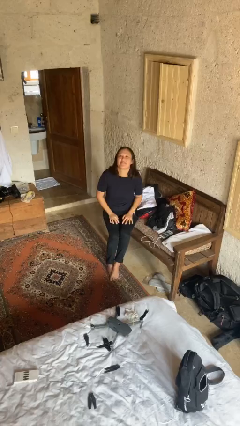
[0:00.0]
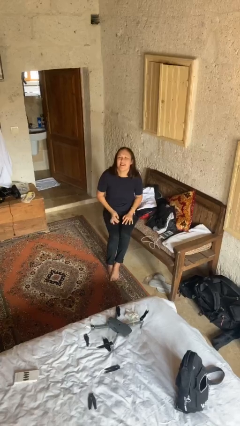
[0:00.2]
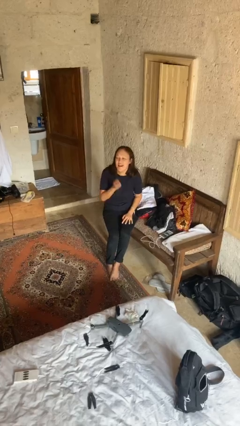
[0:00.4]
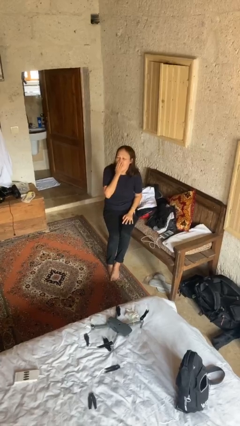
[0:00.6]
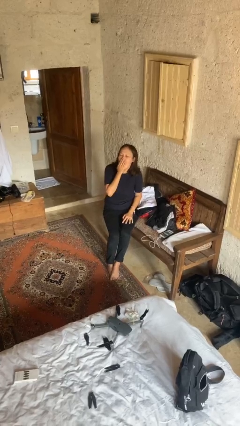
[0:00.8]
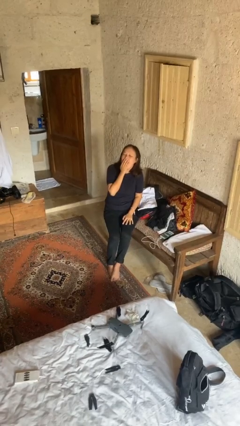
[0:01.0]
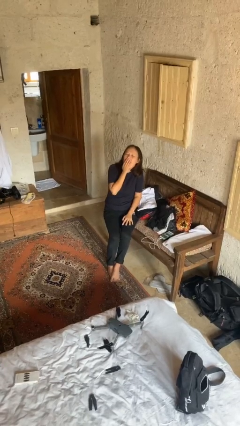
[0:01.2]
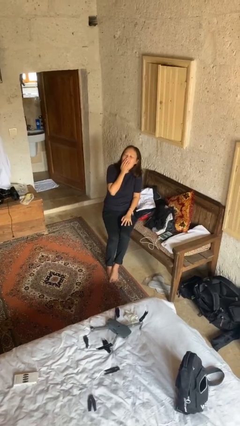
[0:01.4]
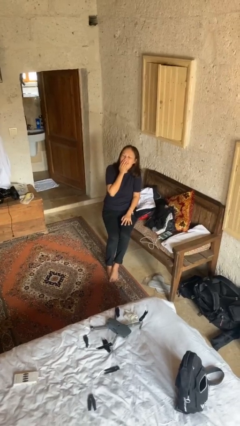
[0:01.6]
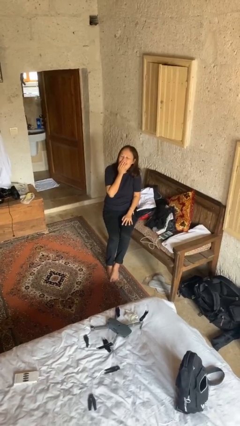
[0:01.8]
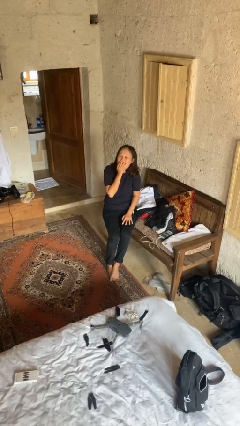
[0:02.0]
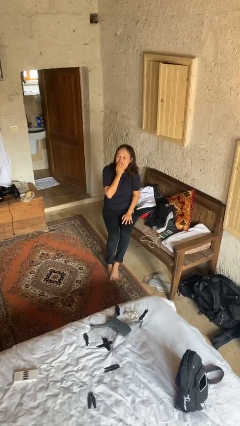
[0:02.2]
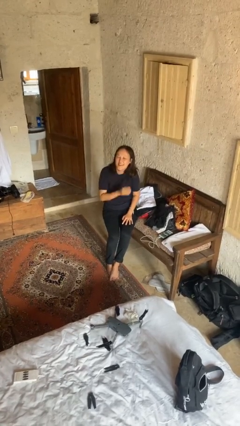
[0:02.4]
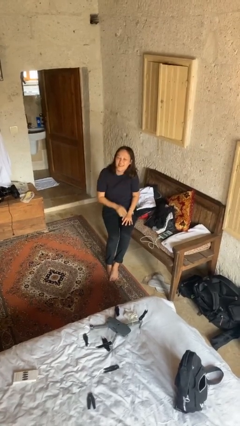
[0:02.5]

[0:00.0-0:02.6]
person yawns

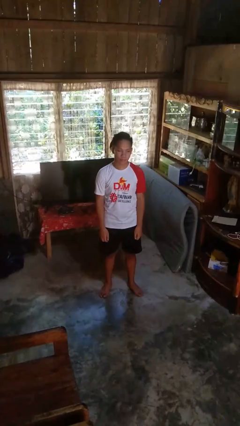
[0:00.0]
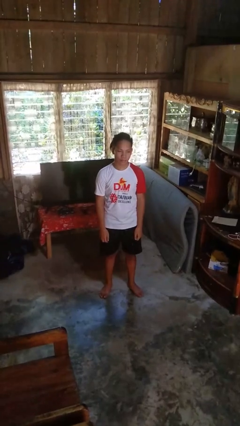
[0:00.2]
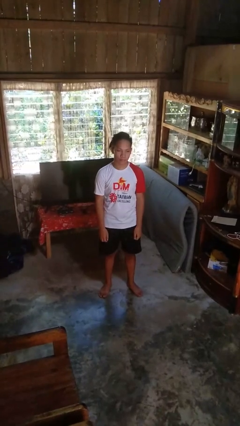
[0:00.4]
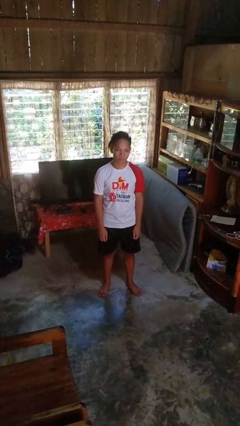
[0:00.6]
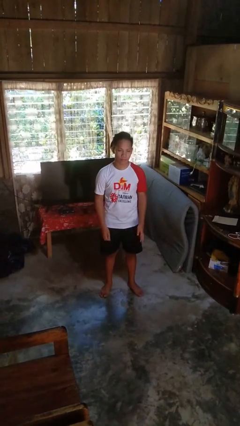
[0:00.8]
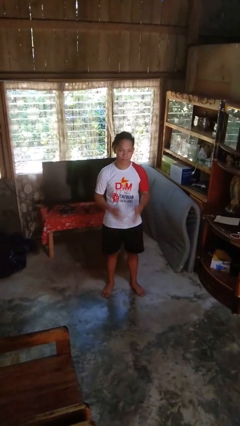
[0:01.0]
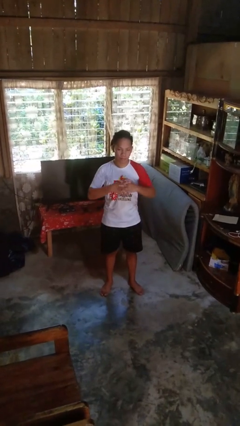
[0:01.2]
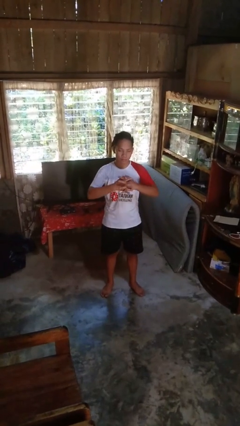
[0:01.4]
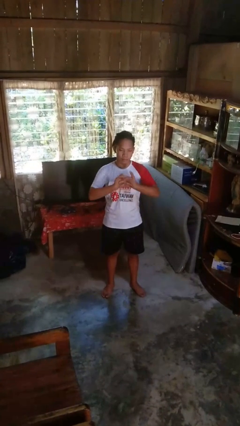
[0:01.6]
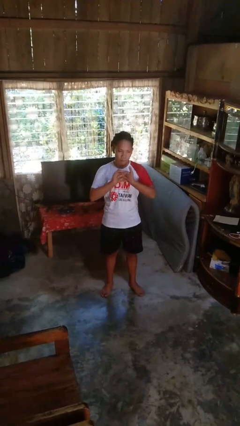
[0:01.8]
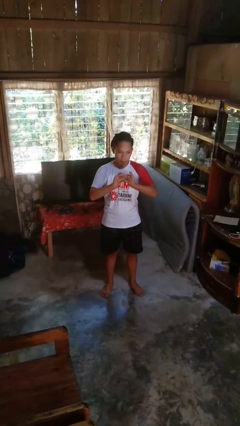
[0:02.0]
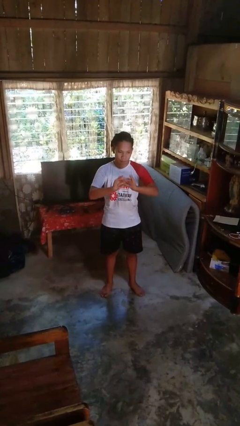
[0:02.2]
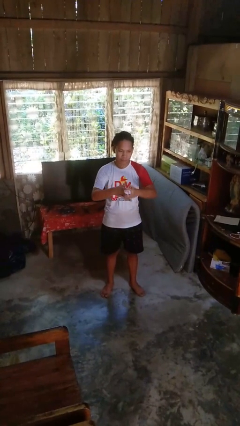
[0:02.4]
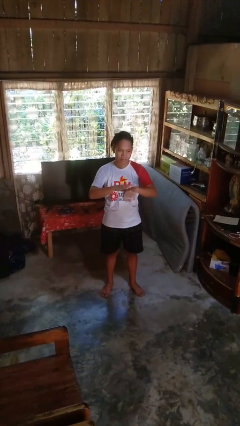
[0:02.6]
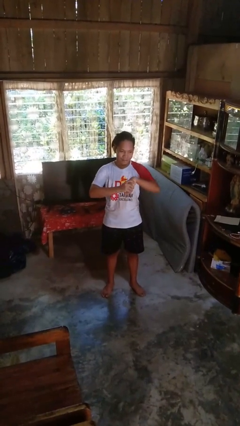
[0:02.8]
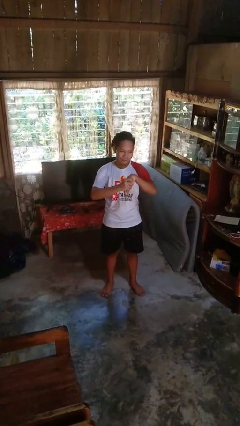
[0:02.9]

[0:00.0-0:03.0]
person cracks knuckles

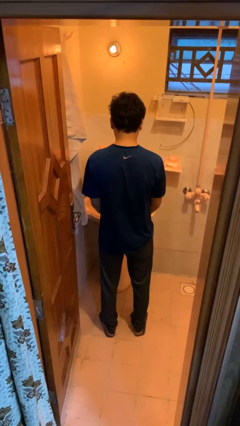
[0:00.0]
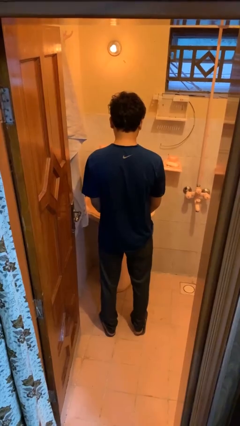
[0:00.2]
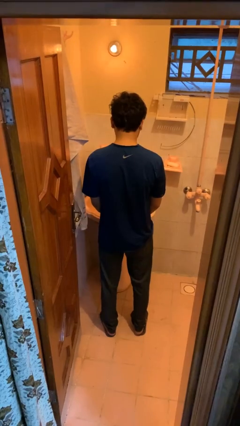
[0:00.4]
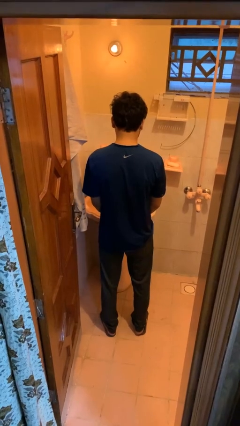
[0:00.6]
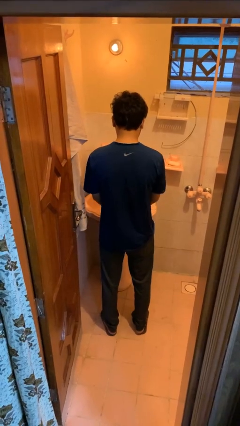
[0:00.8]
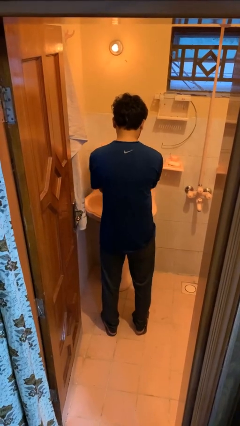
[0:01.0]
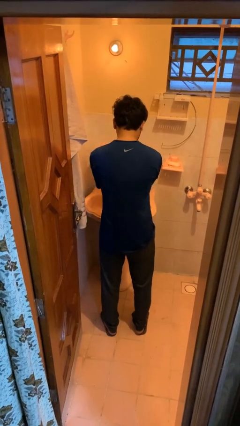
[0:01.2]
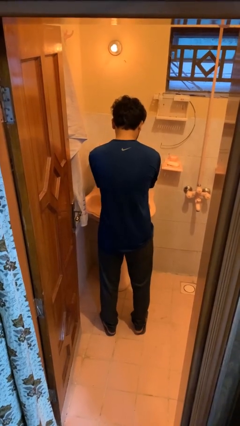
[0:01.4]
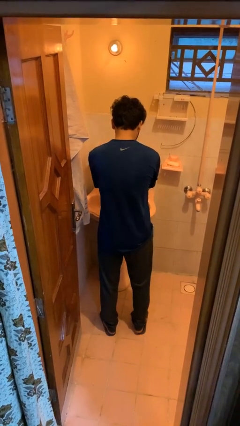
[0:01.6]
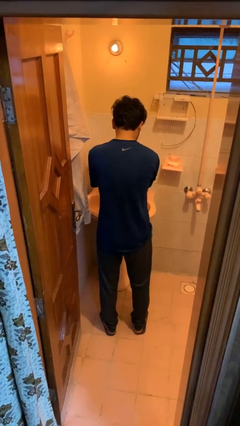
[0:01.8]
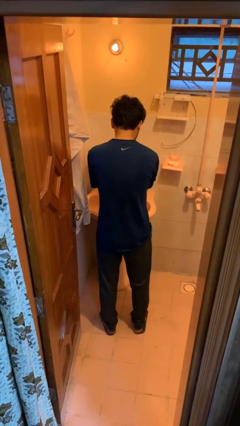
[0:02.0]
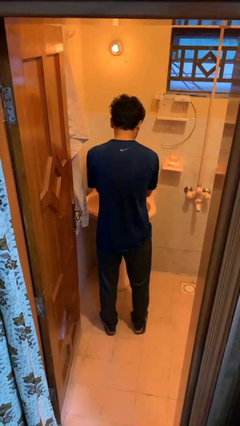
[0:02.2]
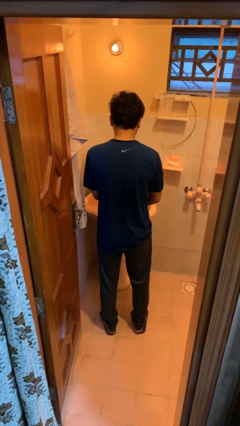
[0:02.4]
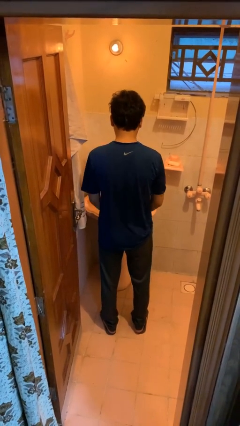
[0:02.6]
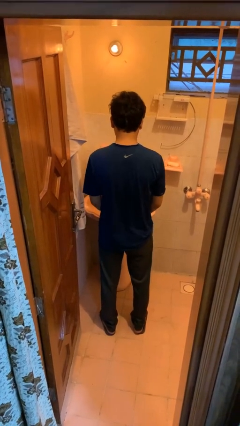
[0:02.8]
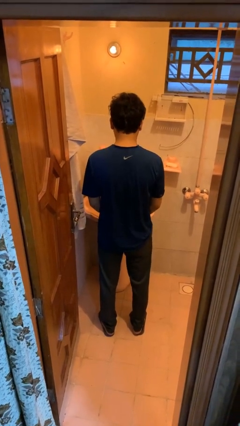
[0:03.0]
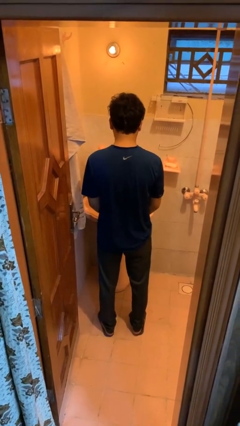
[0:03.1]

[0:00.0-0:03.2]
person washes hands

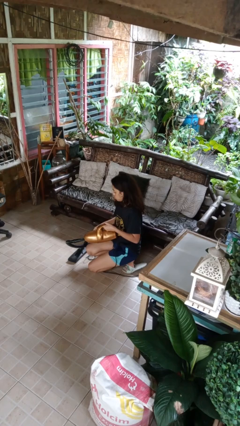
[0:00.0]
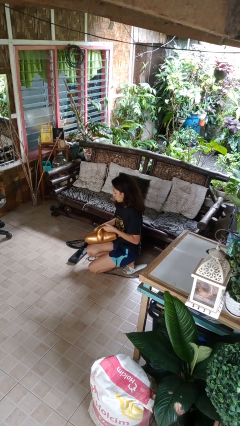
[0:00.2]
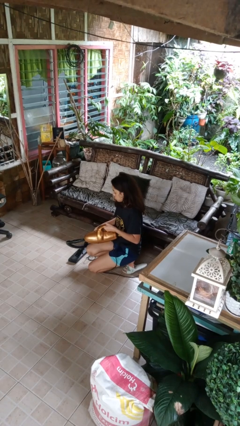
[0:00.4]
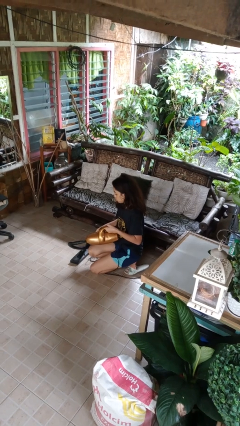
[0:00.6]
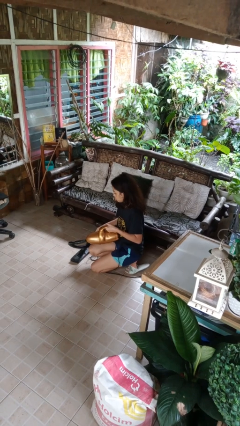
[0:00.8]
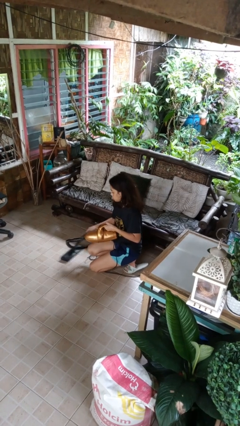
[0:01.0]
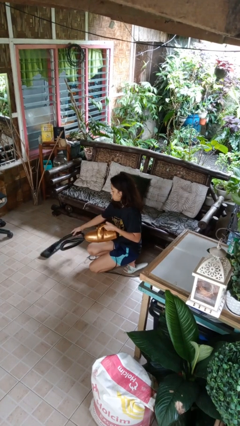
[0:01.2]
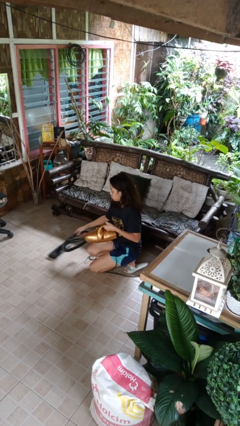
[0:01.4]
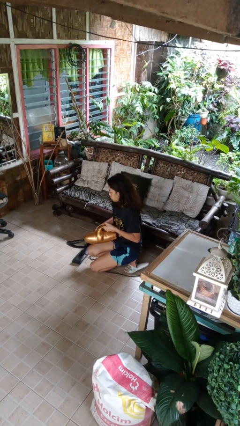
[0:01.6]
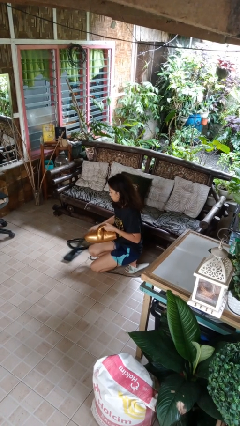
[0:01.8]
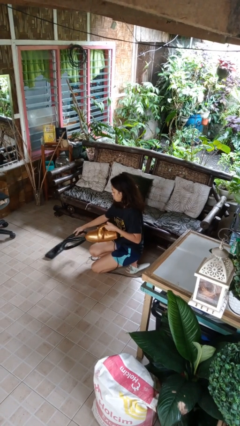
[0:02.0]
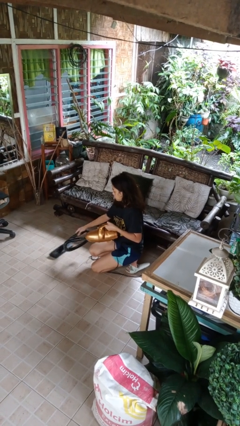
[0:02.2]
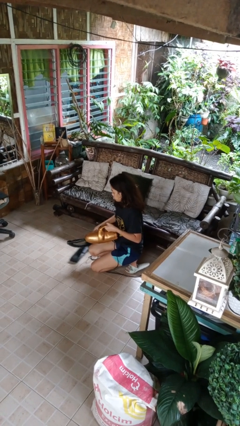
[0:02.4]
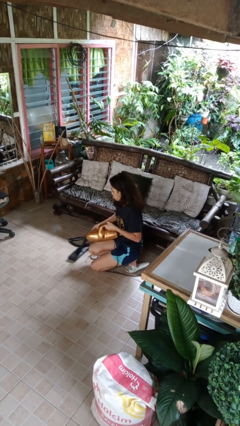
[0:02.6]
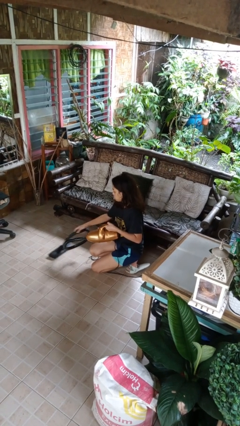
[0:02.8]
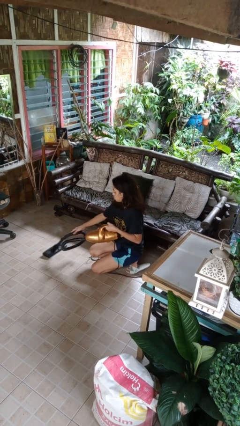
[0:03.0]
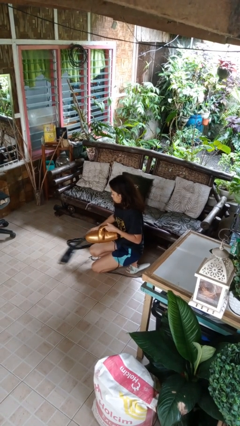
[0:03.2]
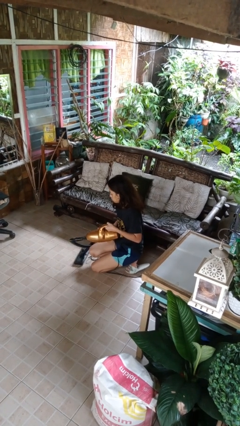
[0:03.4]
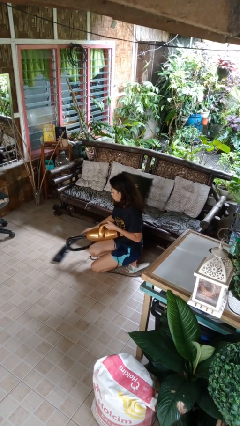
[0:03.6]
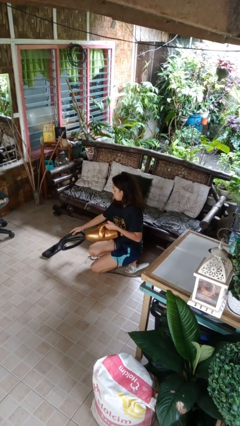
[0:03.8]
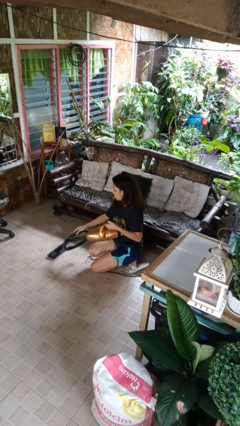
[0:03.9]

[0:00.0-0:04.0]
person vacuums carpet

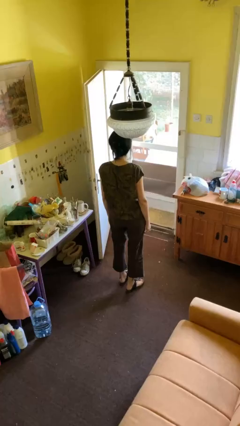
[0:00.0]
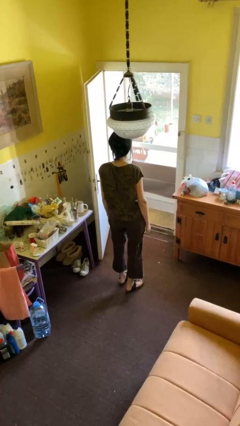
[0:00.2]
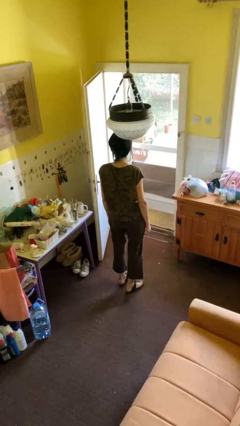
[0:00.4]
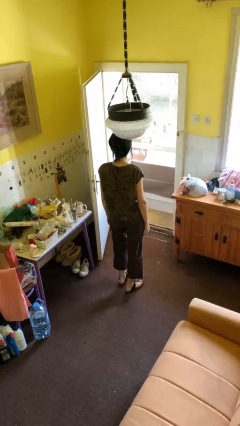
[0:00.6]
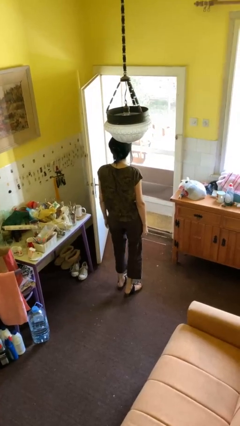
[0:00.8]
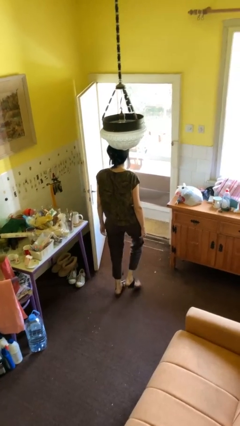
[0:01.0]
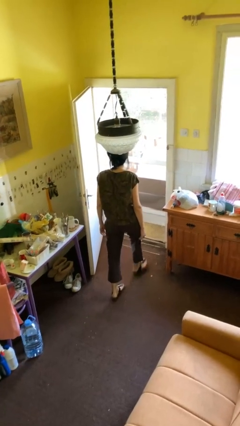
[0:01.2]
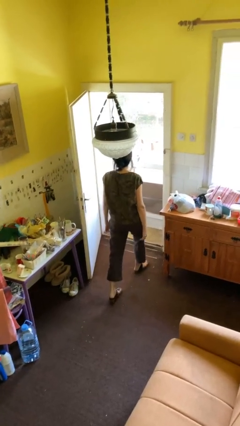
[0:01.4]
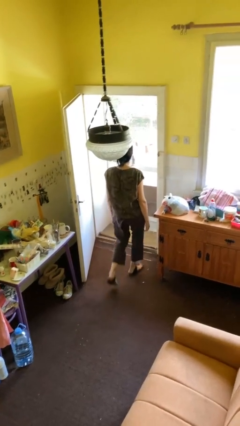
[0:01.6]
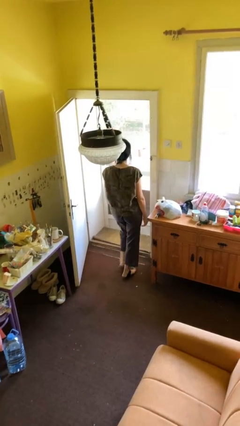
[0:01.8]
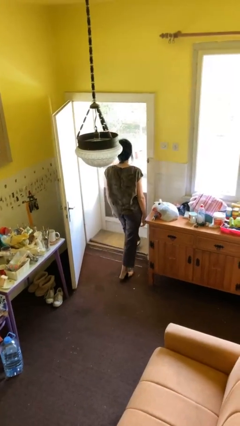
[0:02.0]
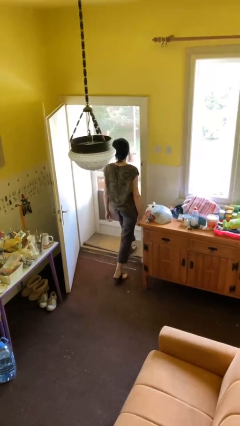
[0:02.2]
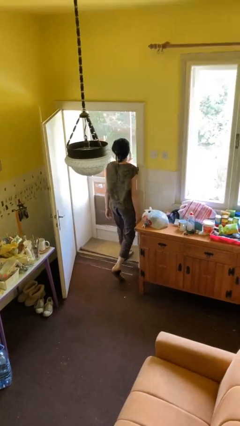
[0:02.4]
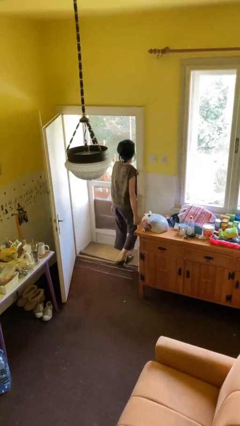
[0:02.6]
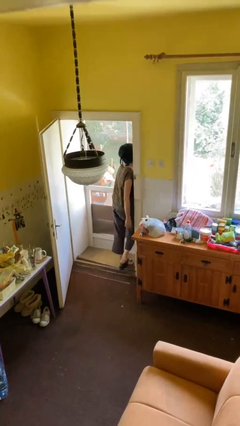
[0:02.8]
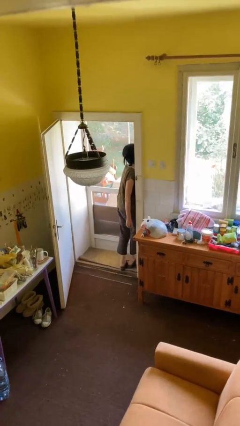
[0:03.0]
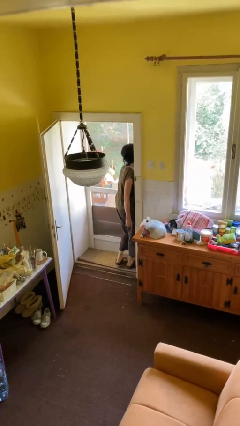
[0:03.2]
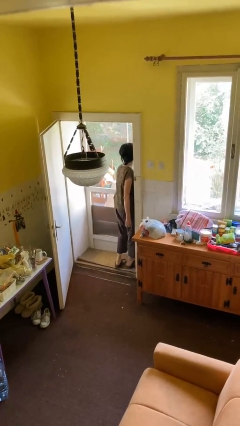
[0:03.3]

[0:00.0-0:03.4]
person bumps into wall

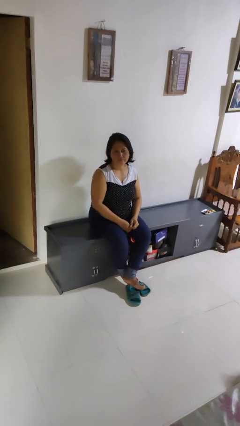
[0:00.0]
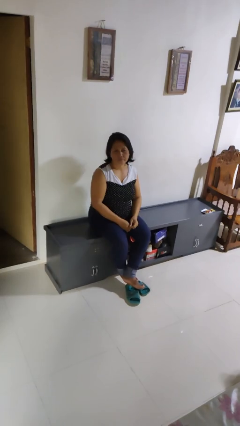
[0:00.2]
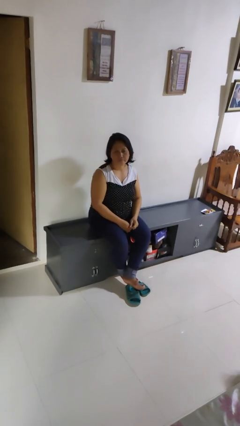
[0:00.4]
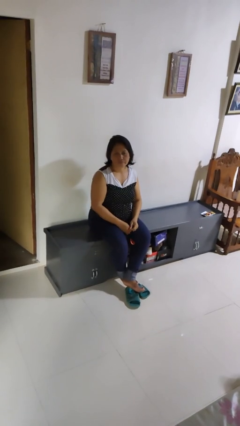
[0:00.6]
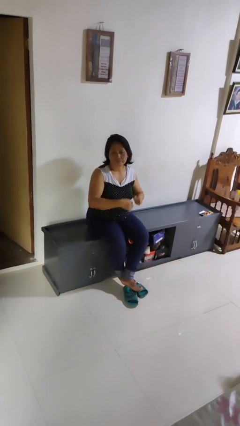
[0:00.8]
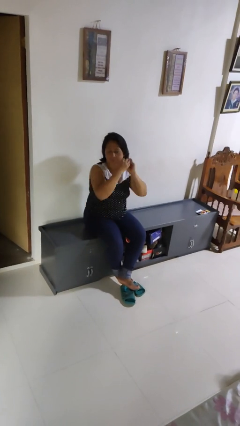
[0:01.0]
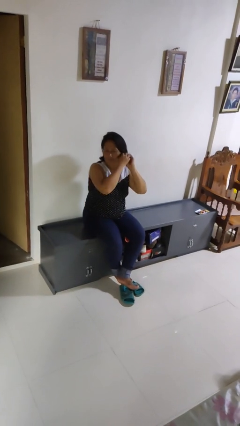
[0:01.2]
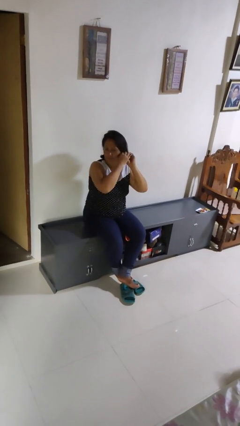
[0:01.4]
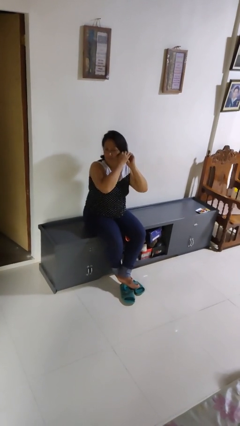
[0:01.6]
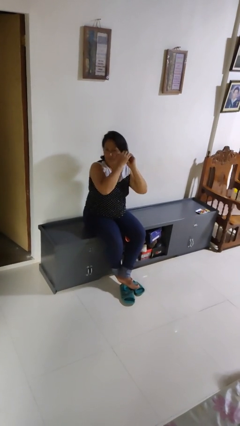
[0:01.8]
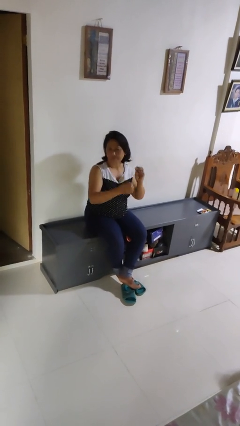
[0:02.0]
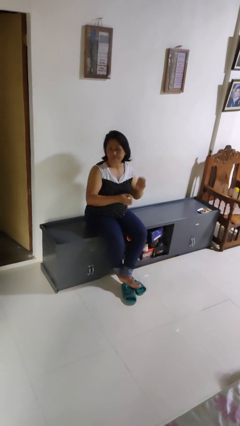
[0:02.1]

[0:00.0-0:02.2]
person takes off earrings
